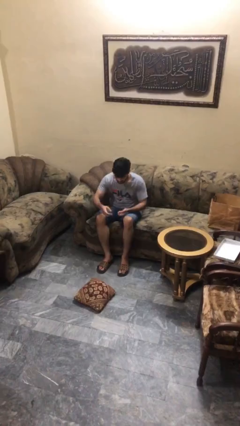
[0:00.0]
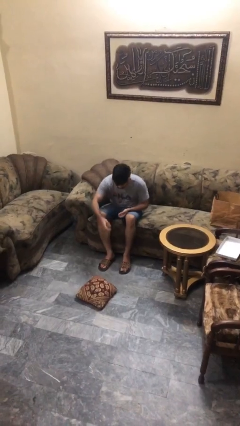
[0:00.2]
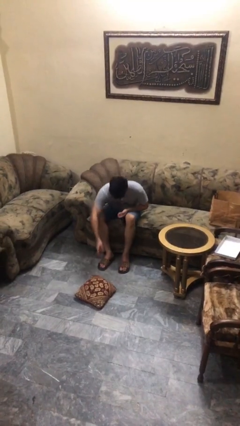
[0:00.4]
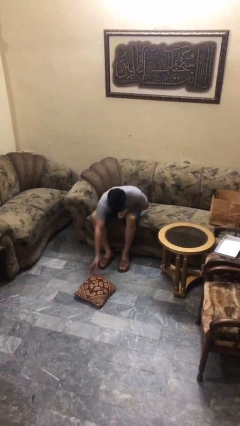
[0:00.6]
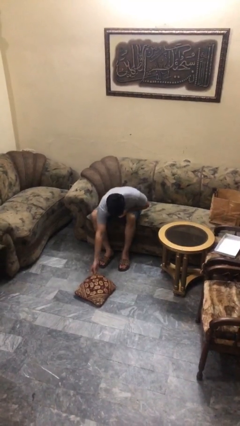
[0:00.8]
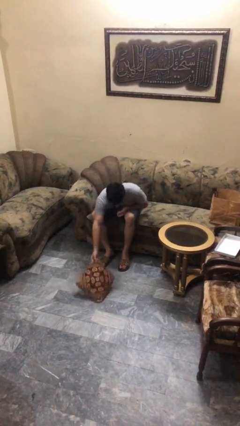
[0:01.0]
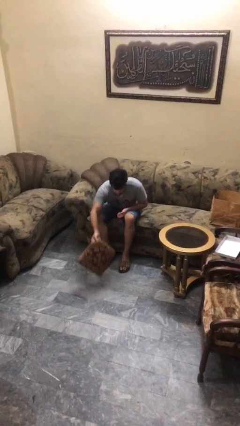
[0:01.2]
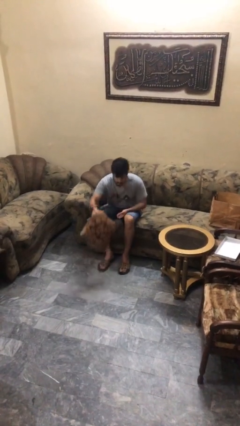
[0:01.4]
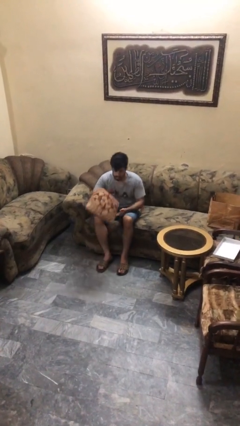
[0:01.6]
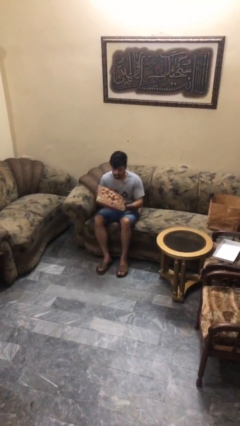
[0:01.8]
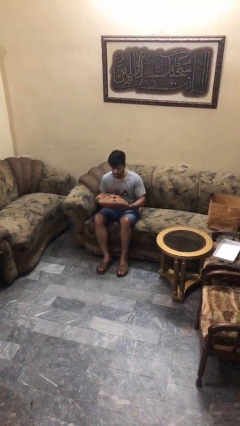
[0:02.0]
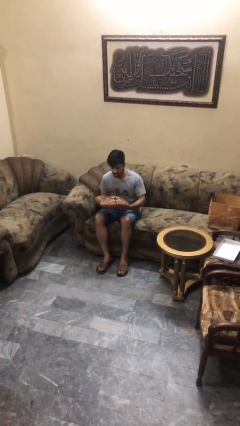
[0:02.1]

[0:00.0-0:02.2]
person picks up object from floor

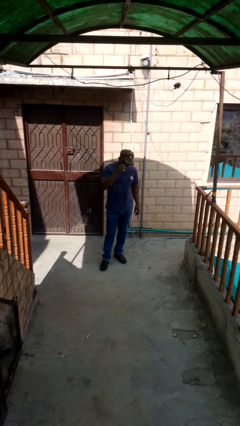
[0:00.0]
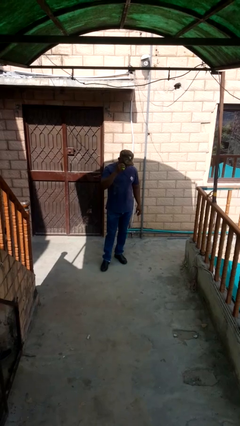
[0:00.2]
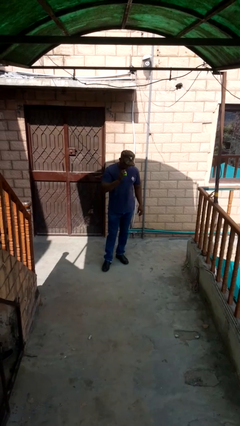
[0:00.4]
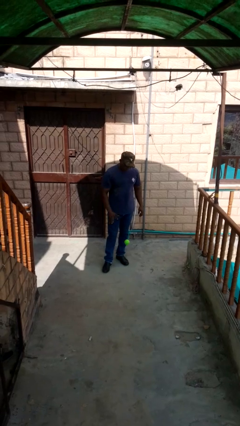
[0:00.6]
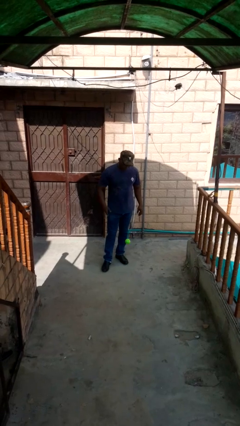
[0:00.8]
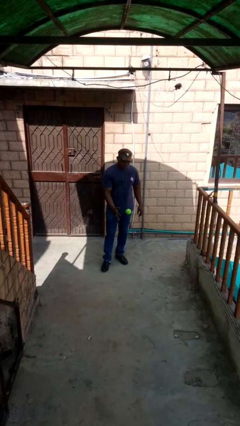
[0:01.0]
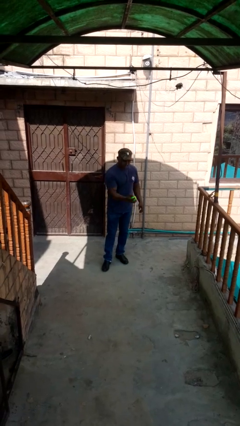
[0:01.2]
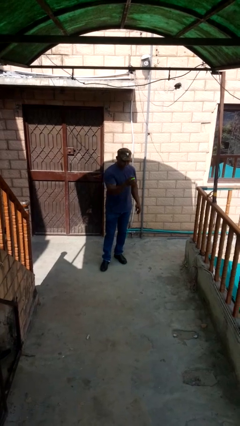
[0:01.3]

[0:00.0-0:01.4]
person bounces ball on floor

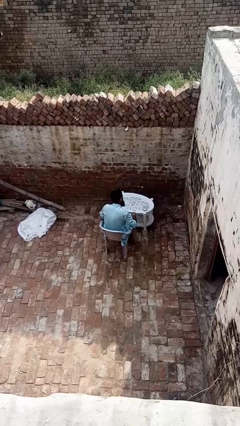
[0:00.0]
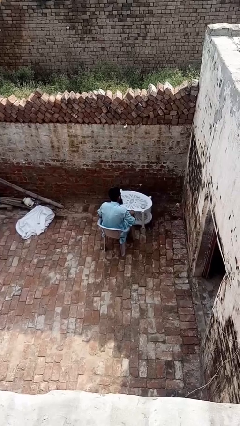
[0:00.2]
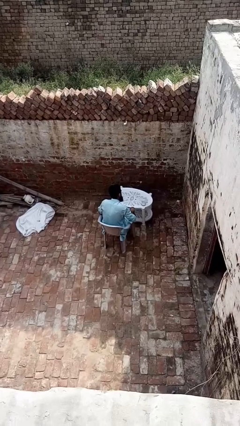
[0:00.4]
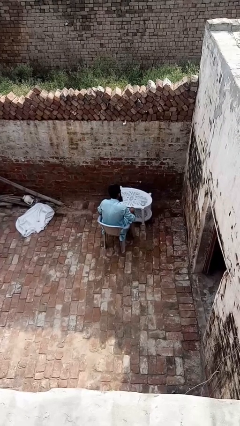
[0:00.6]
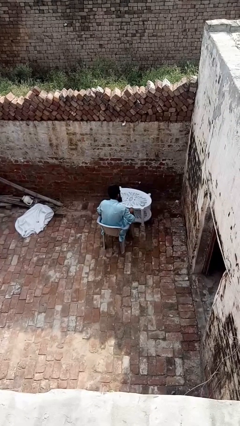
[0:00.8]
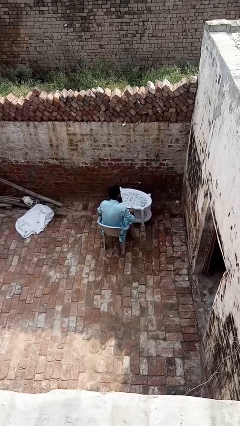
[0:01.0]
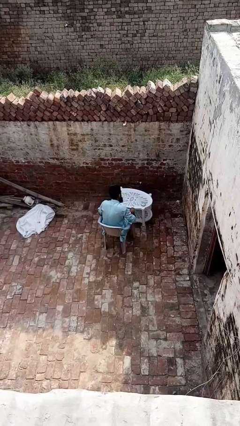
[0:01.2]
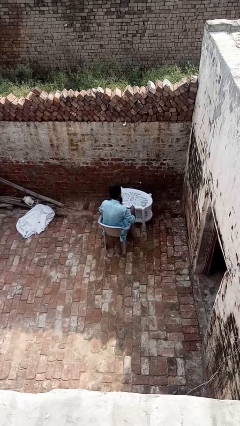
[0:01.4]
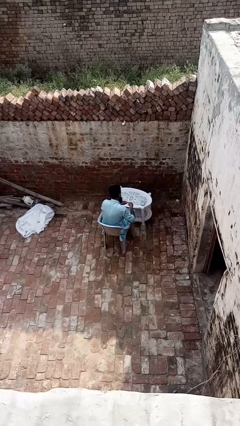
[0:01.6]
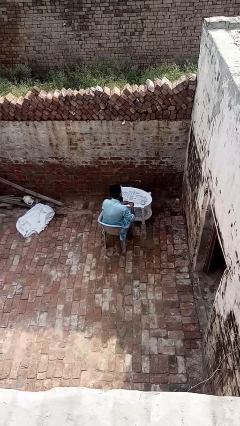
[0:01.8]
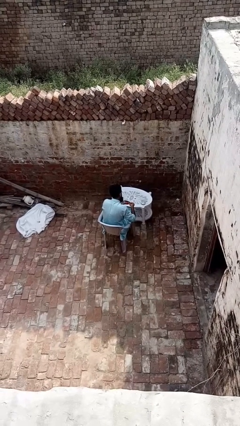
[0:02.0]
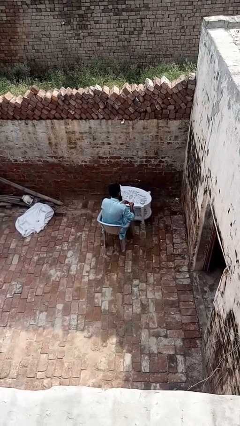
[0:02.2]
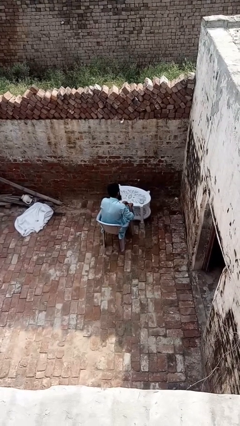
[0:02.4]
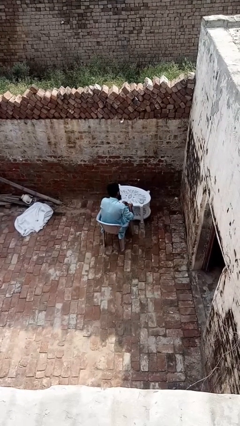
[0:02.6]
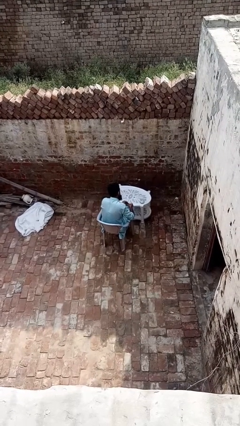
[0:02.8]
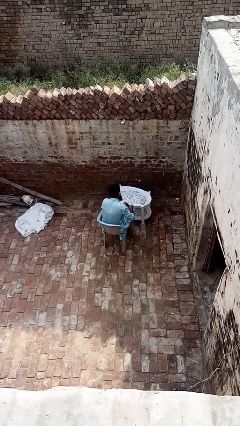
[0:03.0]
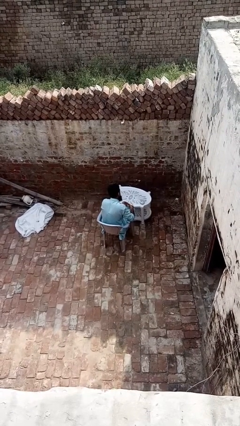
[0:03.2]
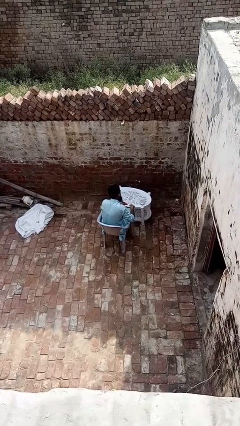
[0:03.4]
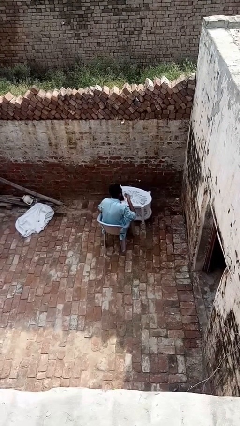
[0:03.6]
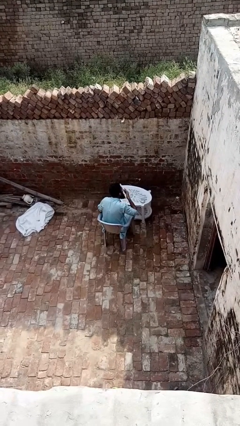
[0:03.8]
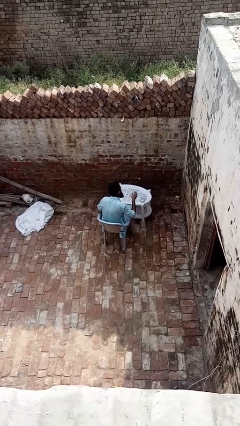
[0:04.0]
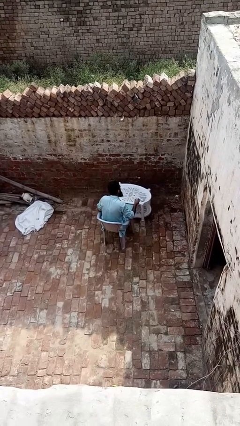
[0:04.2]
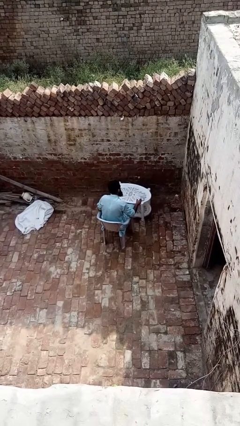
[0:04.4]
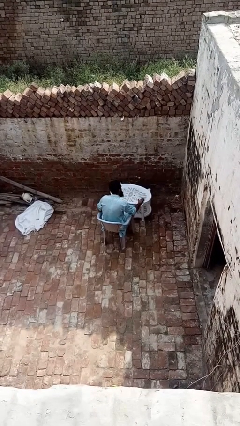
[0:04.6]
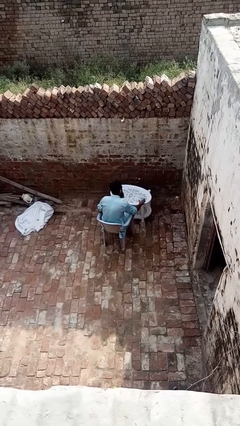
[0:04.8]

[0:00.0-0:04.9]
person takes medicine pills

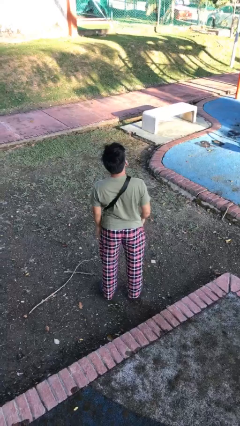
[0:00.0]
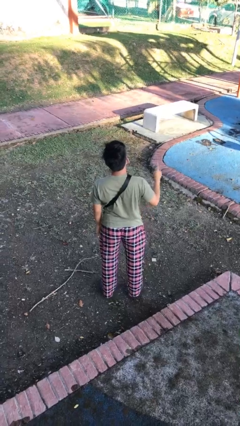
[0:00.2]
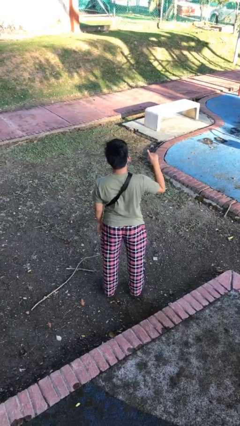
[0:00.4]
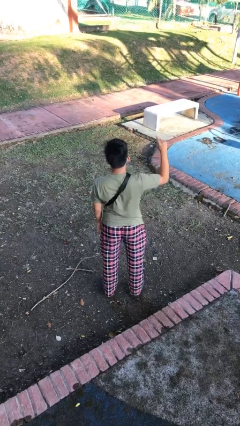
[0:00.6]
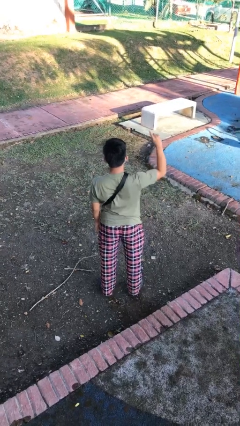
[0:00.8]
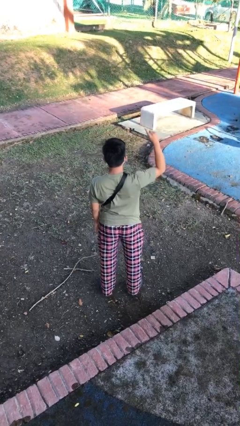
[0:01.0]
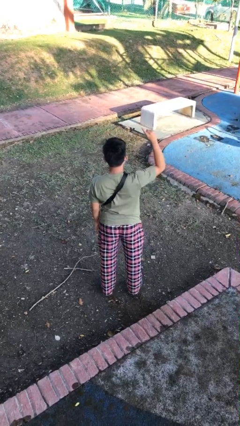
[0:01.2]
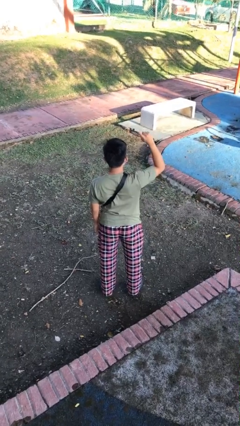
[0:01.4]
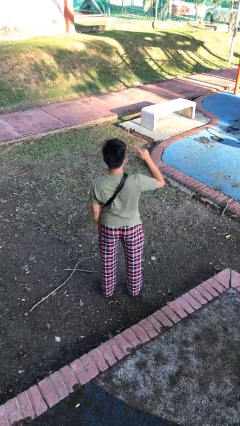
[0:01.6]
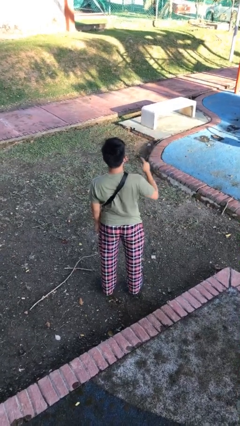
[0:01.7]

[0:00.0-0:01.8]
person gestures number one

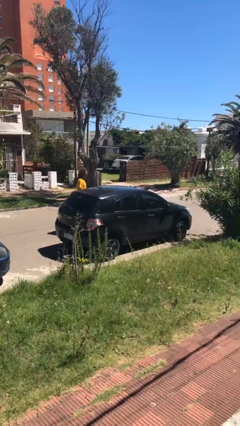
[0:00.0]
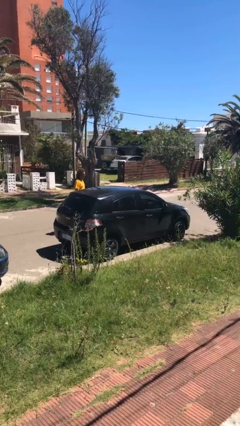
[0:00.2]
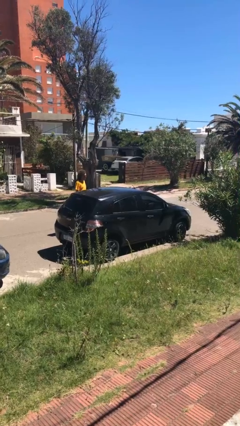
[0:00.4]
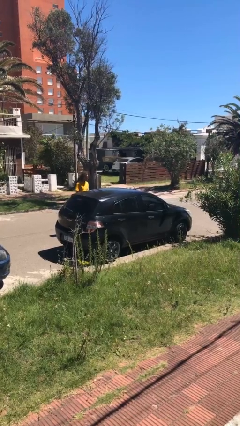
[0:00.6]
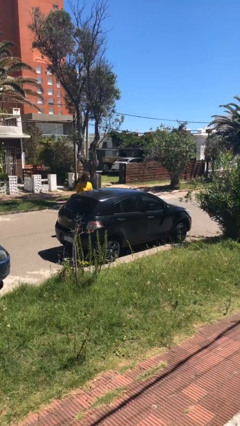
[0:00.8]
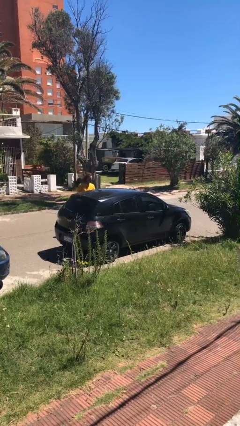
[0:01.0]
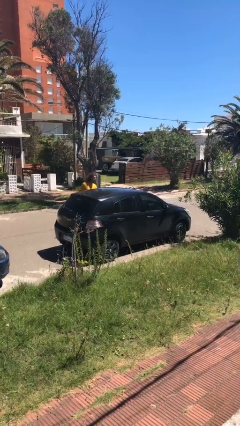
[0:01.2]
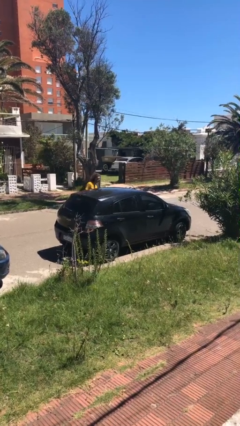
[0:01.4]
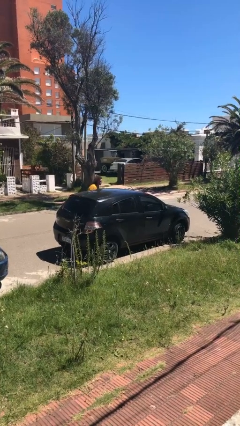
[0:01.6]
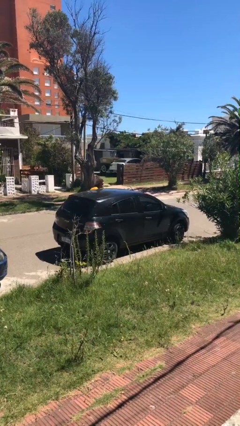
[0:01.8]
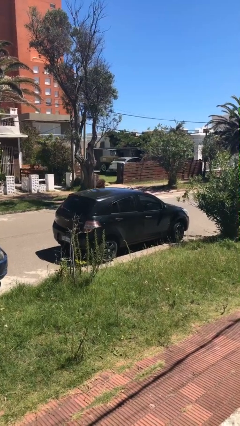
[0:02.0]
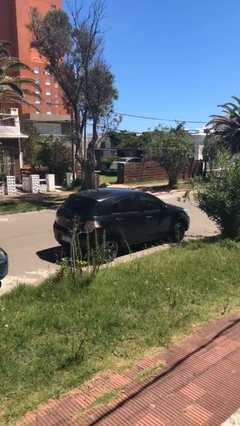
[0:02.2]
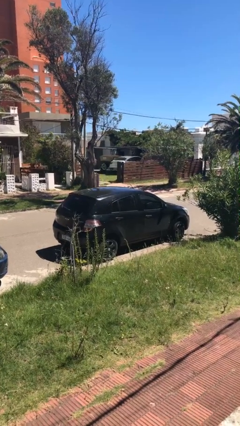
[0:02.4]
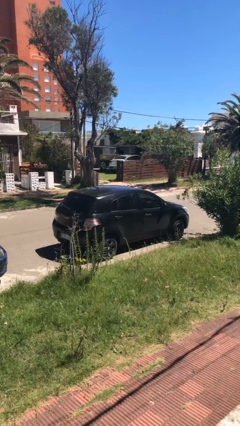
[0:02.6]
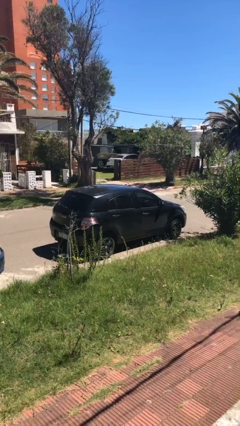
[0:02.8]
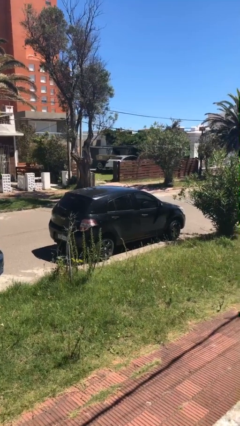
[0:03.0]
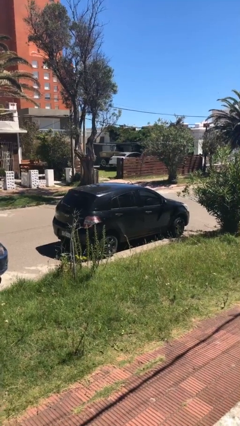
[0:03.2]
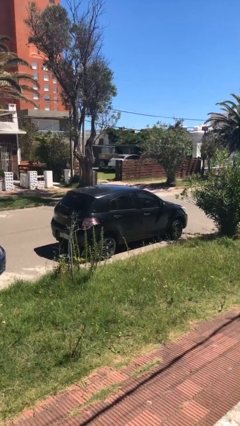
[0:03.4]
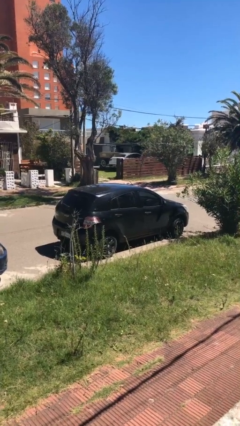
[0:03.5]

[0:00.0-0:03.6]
car picks up person

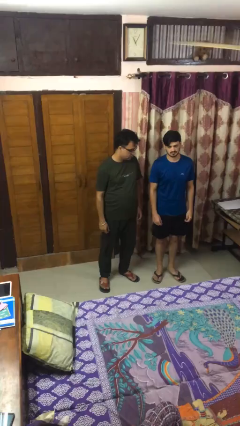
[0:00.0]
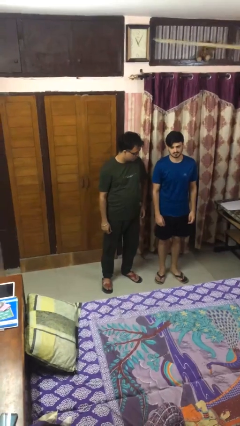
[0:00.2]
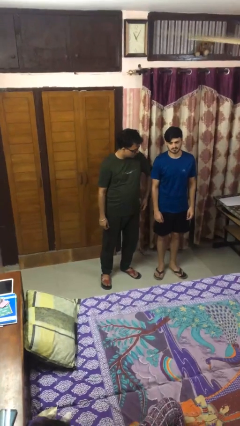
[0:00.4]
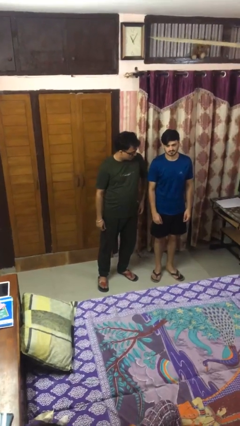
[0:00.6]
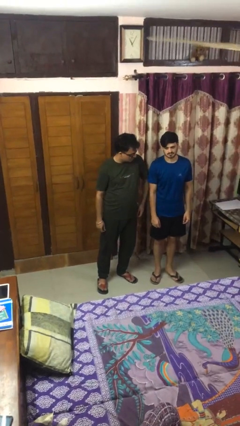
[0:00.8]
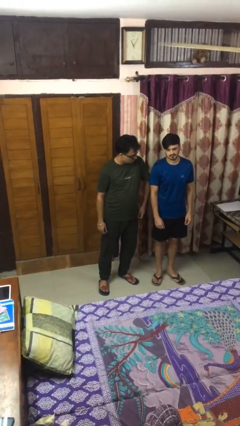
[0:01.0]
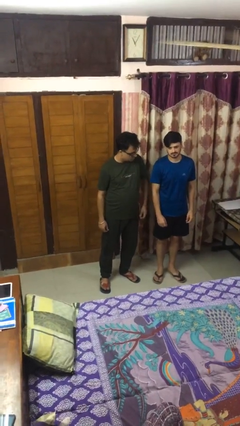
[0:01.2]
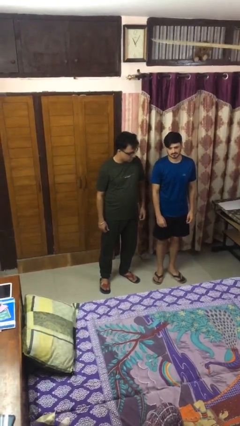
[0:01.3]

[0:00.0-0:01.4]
person nudges person with elbow

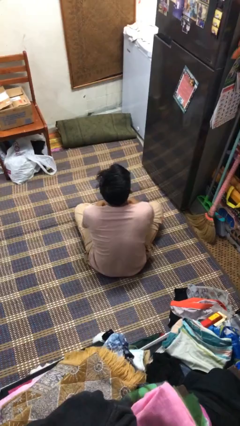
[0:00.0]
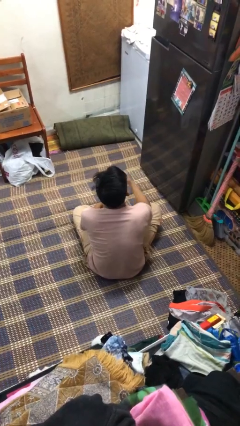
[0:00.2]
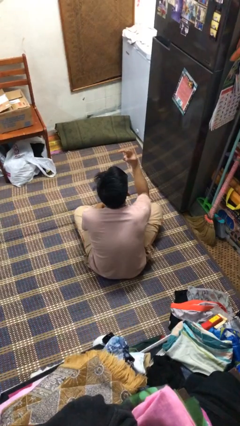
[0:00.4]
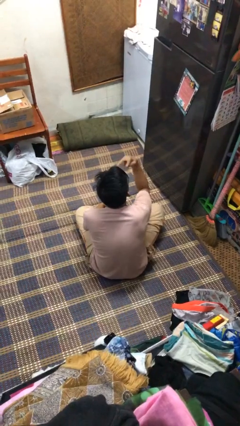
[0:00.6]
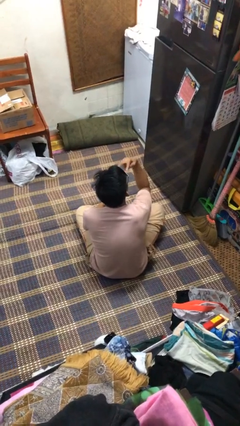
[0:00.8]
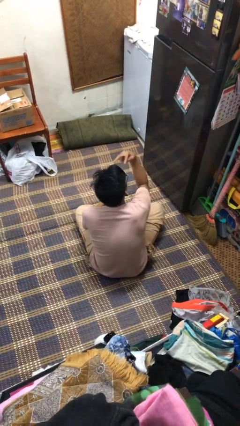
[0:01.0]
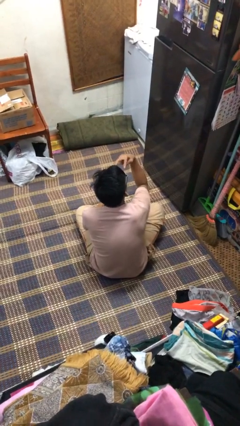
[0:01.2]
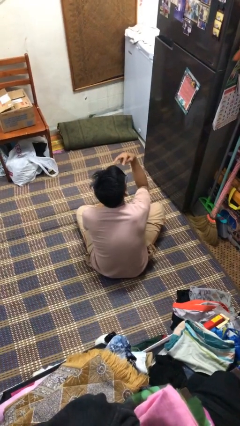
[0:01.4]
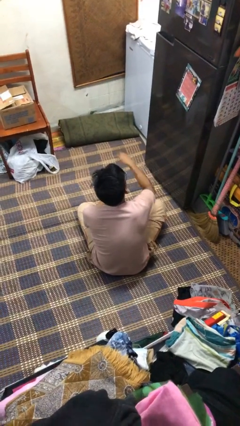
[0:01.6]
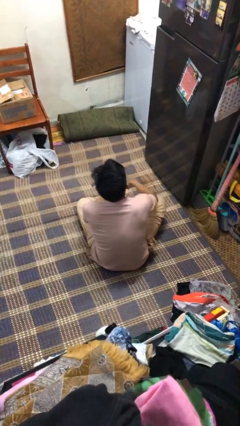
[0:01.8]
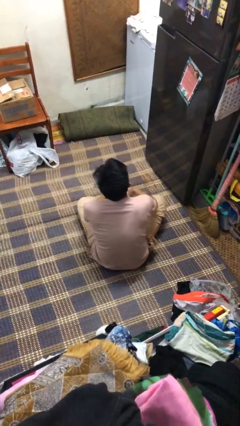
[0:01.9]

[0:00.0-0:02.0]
person gestures watch closely
